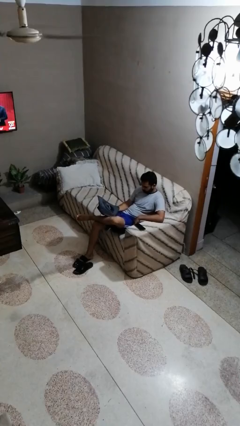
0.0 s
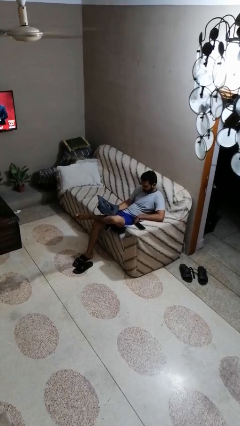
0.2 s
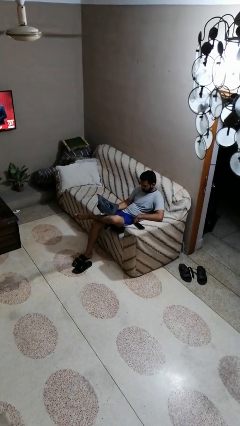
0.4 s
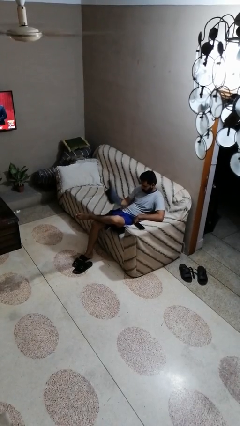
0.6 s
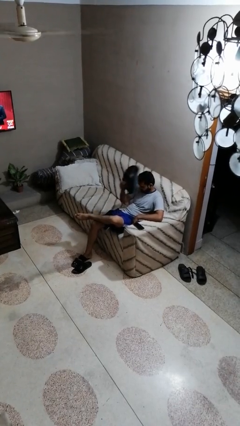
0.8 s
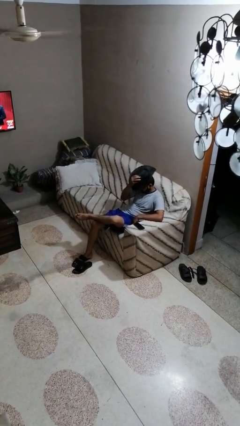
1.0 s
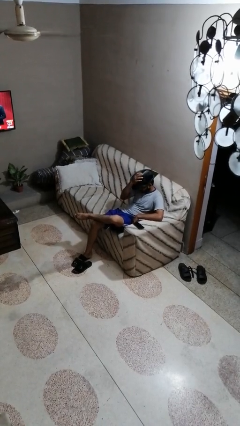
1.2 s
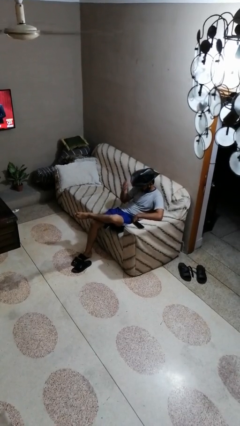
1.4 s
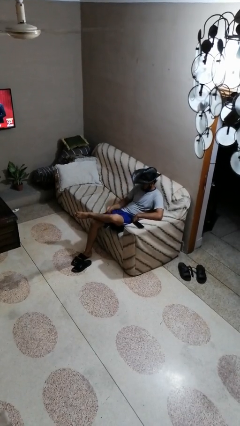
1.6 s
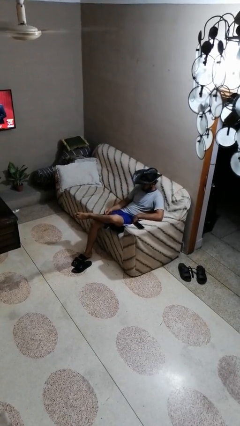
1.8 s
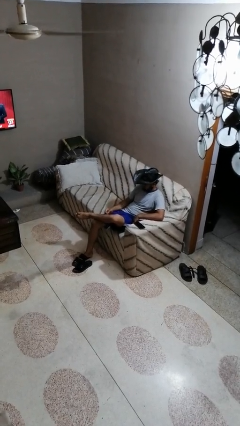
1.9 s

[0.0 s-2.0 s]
person puts on hat

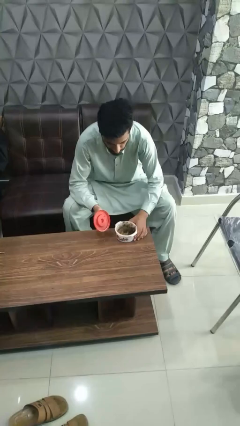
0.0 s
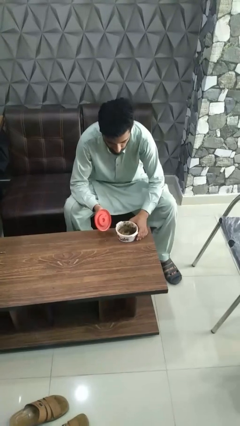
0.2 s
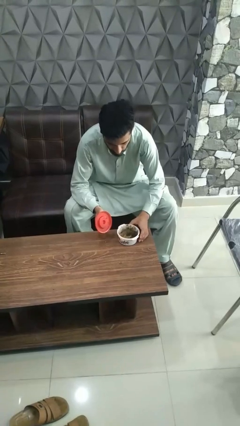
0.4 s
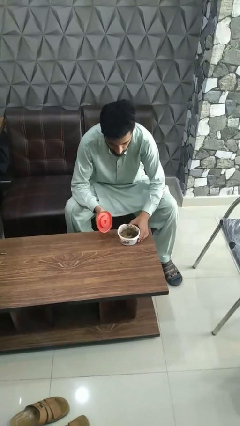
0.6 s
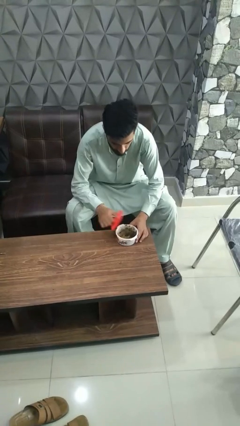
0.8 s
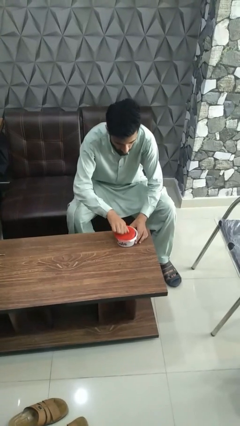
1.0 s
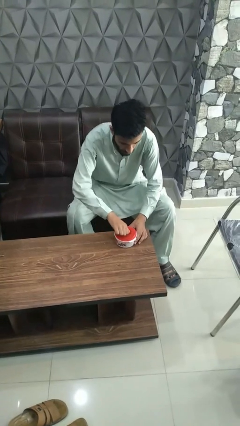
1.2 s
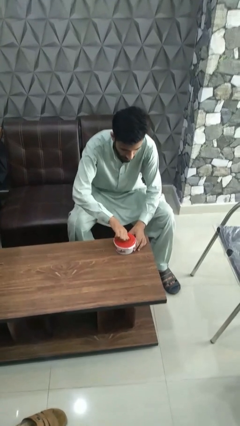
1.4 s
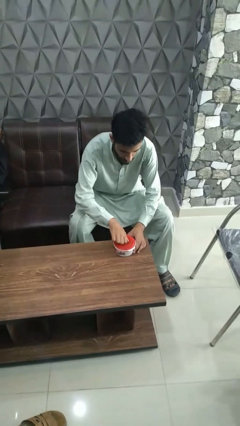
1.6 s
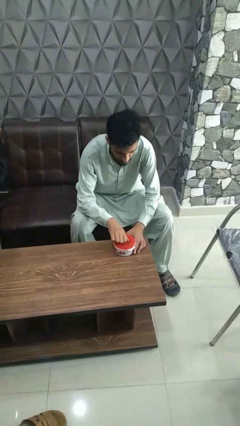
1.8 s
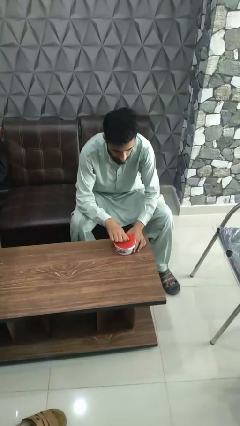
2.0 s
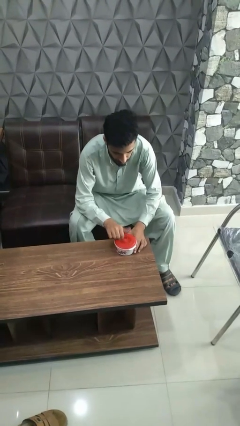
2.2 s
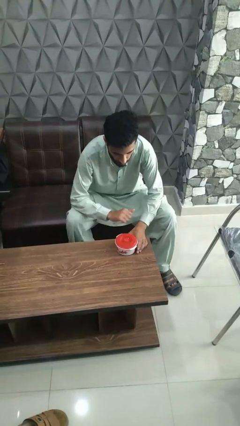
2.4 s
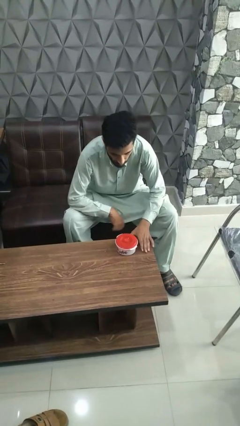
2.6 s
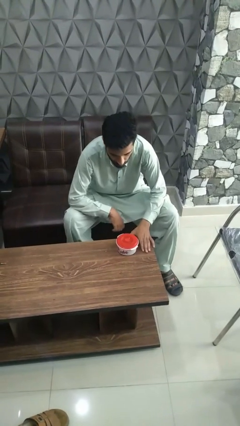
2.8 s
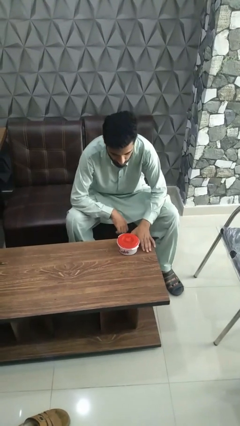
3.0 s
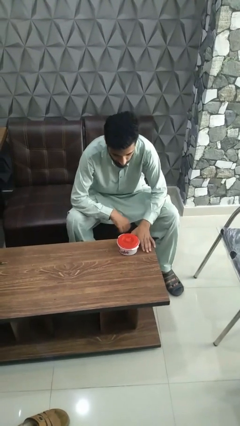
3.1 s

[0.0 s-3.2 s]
person closes jar

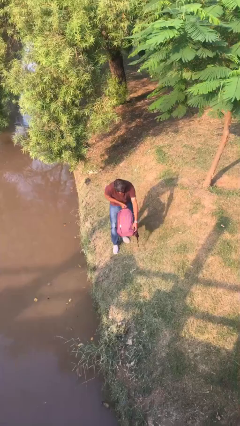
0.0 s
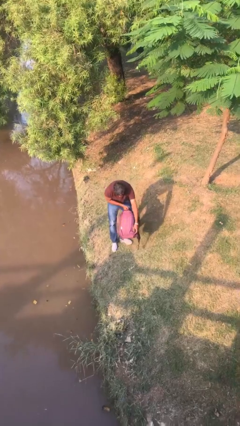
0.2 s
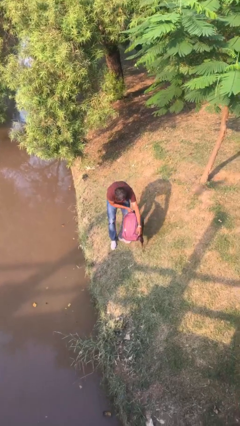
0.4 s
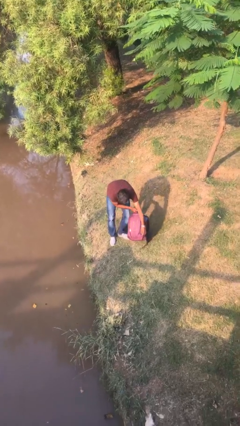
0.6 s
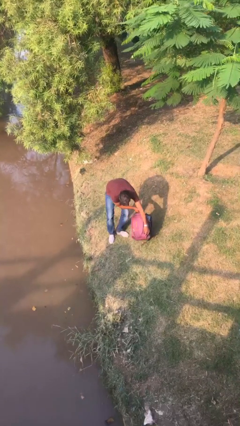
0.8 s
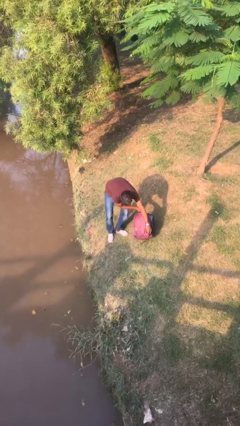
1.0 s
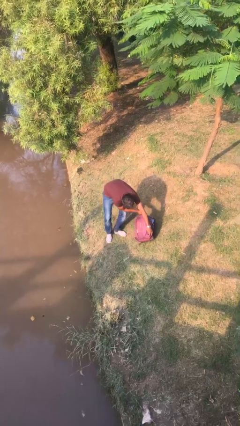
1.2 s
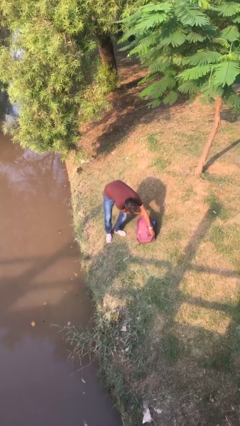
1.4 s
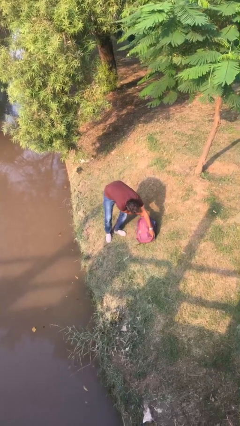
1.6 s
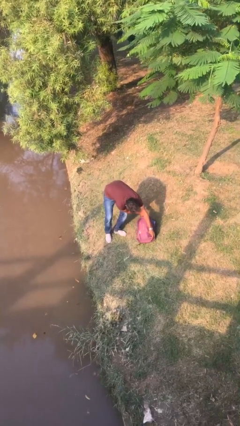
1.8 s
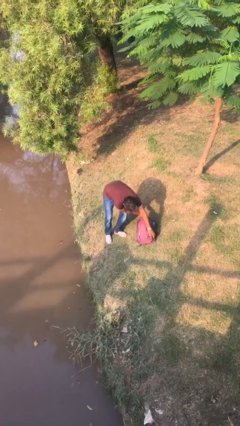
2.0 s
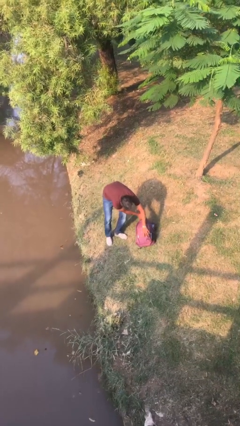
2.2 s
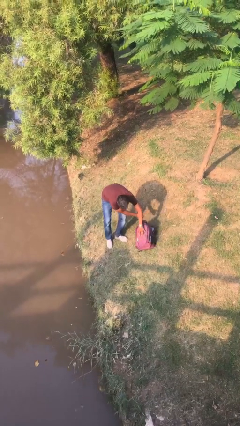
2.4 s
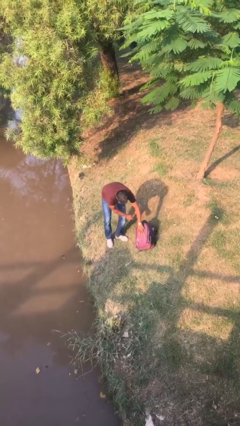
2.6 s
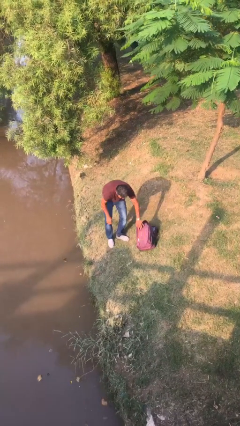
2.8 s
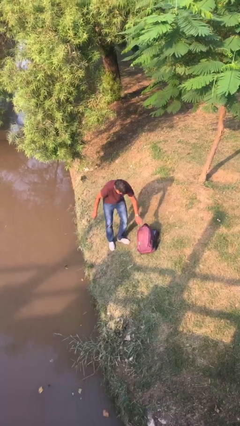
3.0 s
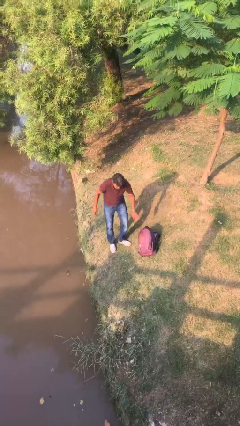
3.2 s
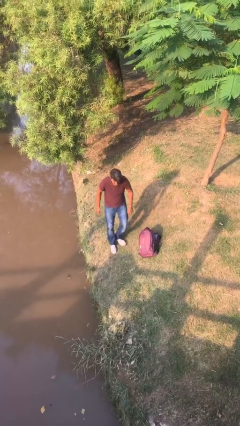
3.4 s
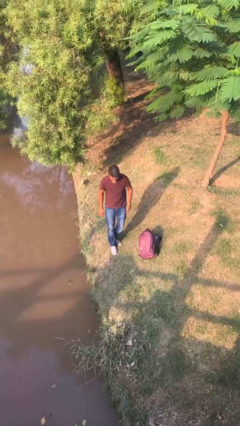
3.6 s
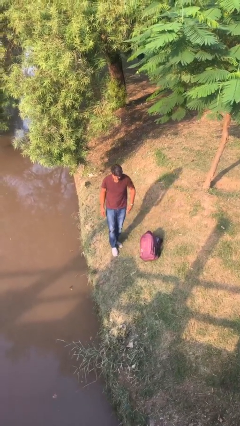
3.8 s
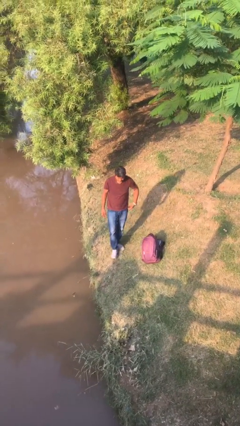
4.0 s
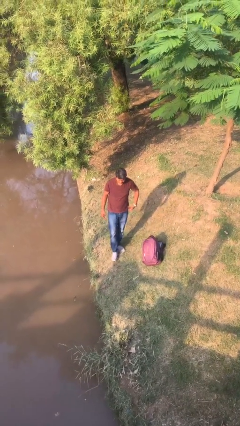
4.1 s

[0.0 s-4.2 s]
person puts down object on floor

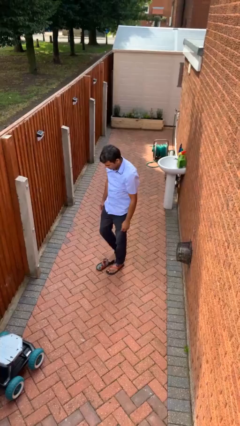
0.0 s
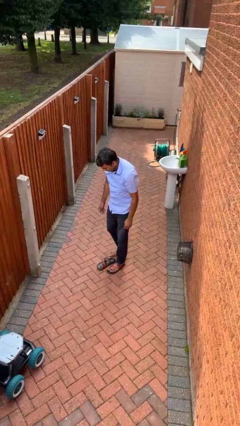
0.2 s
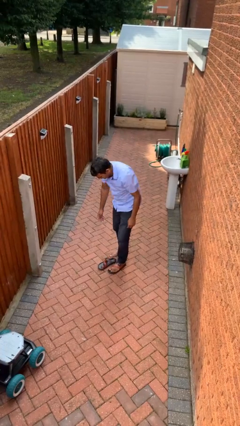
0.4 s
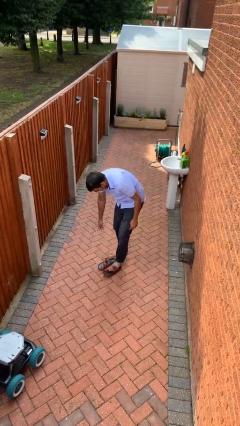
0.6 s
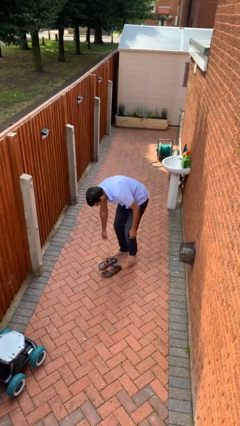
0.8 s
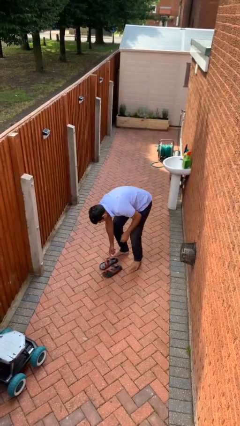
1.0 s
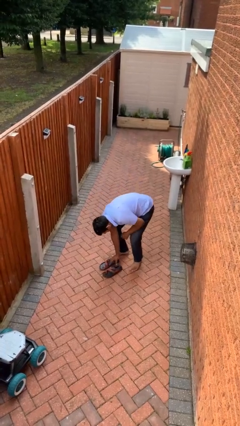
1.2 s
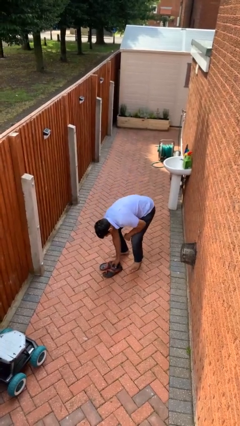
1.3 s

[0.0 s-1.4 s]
person takes off shoes

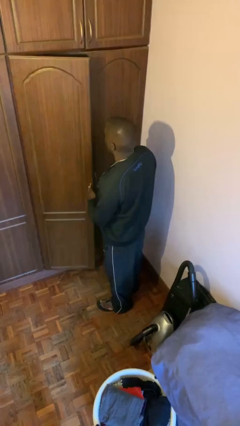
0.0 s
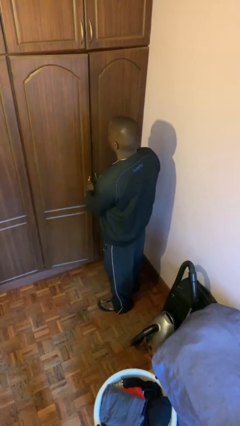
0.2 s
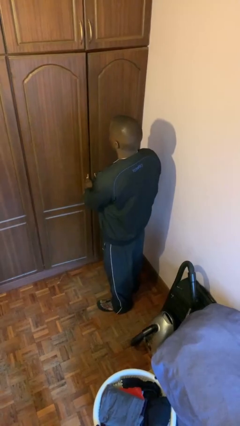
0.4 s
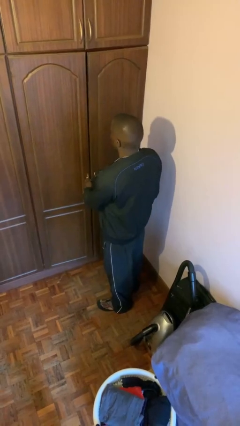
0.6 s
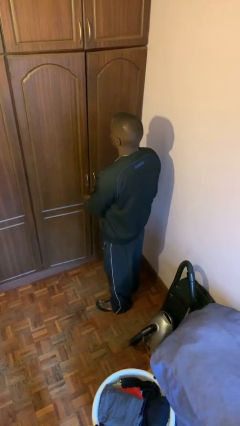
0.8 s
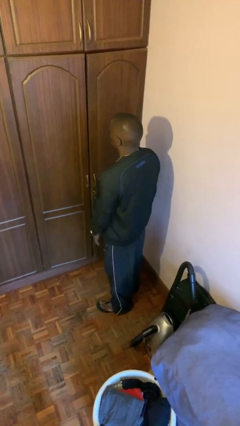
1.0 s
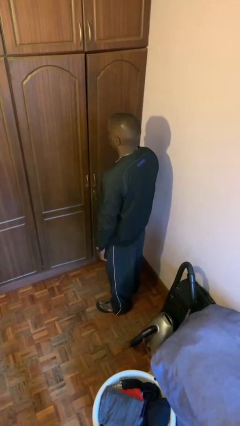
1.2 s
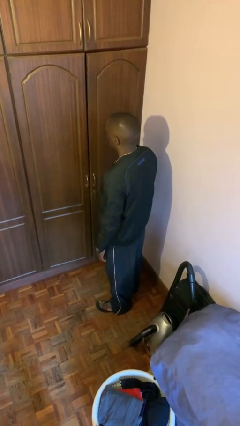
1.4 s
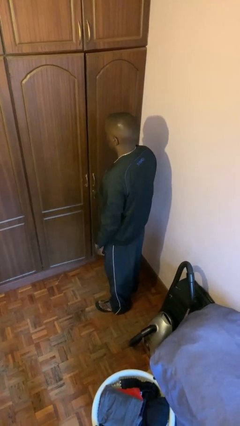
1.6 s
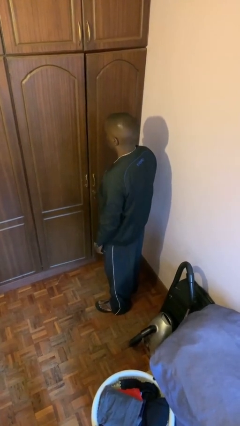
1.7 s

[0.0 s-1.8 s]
person closes closet door

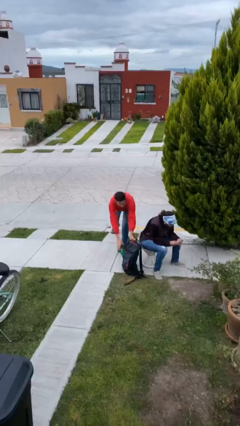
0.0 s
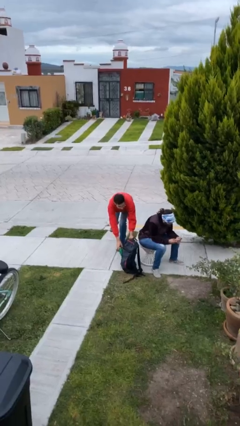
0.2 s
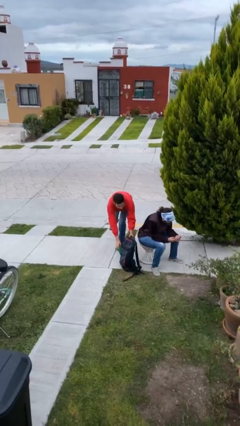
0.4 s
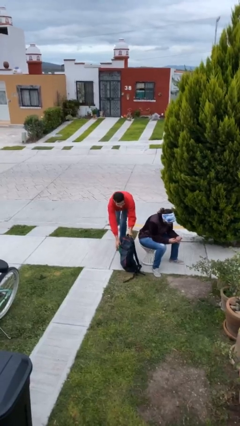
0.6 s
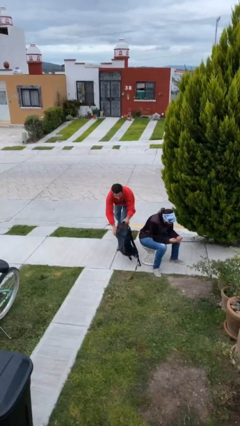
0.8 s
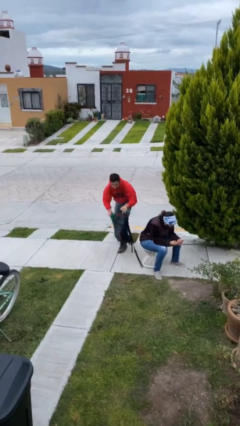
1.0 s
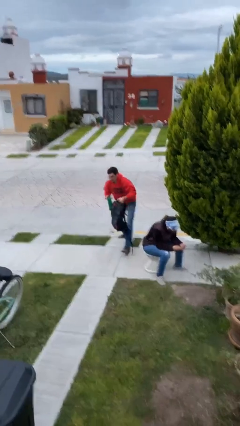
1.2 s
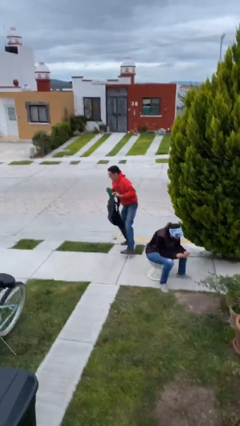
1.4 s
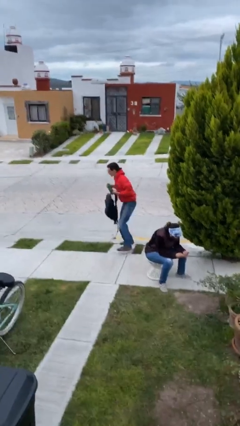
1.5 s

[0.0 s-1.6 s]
person steals object from person

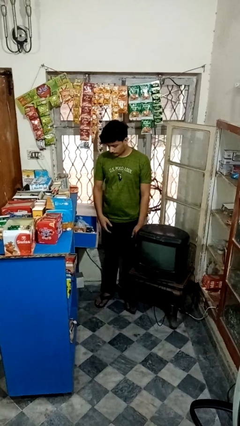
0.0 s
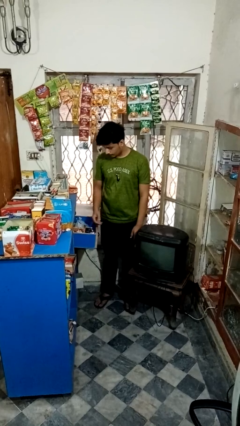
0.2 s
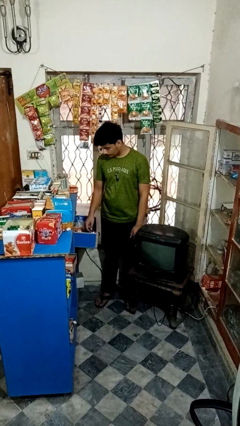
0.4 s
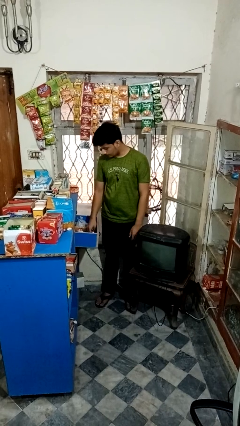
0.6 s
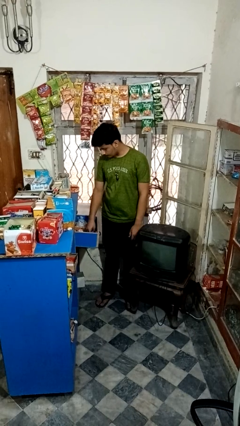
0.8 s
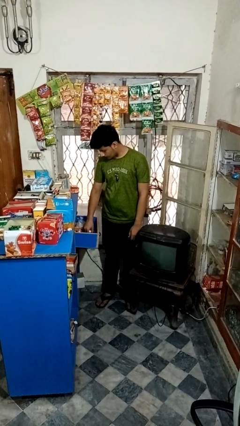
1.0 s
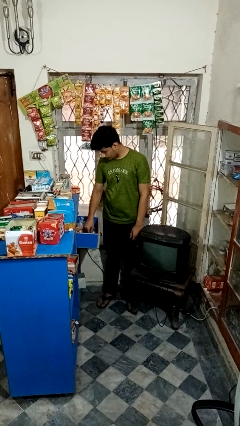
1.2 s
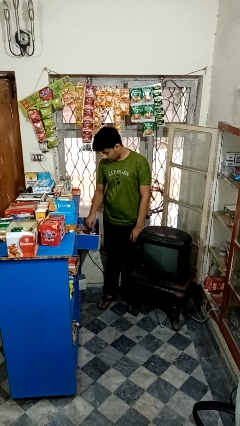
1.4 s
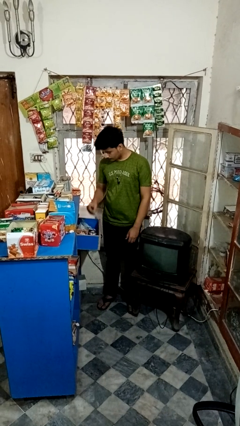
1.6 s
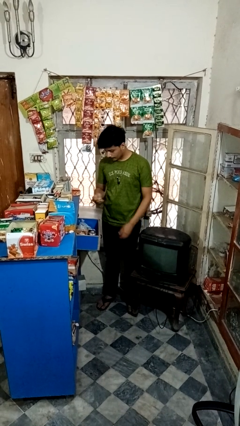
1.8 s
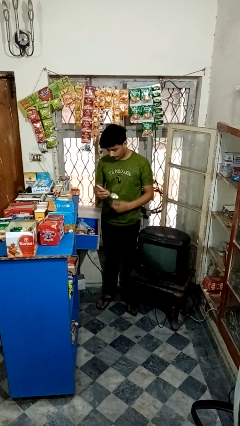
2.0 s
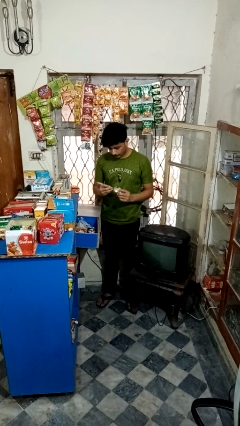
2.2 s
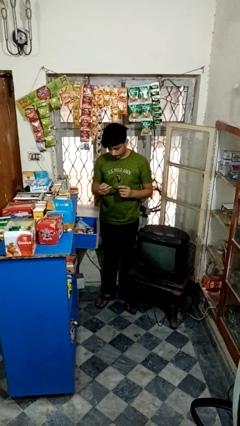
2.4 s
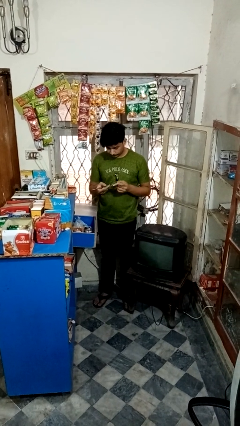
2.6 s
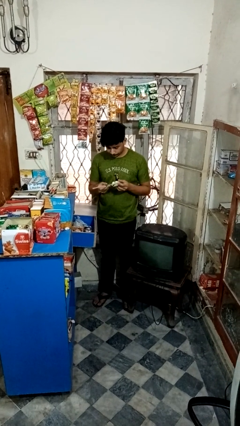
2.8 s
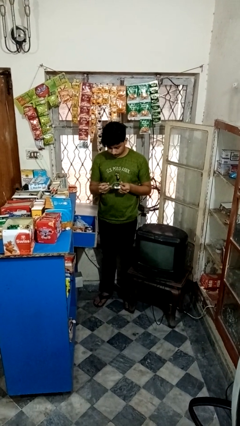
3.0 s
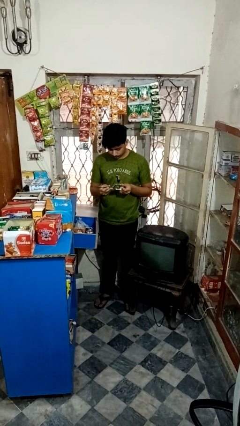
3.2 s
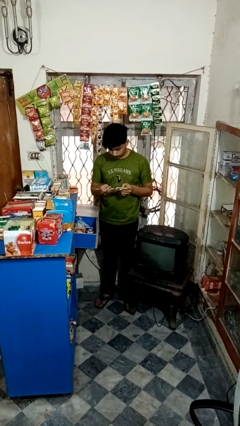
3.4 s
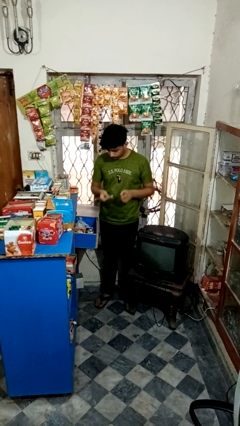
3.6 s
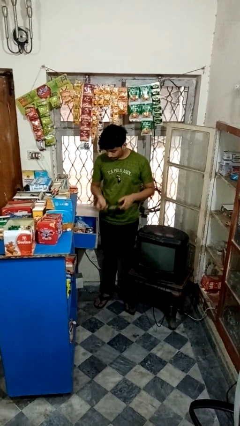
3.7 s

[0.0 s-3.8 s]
person takes object from kitchen drawer
